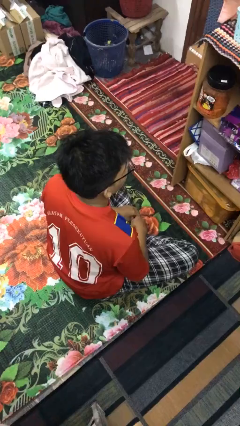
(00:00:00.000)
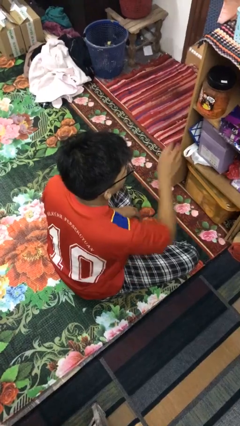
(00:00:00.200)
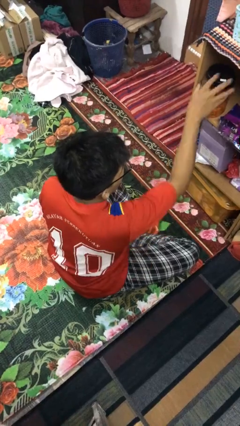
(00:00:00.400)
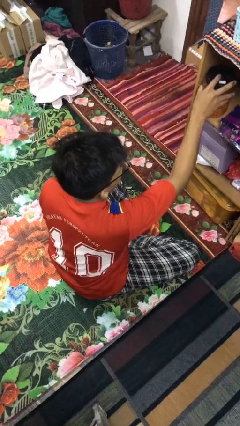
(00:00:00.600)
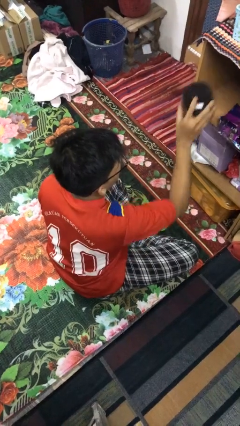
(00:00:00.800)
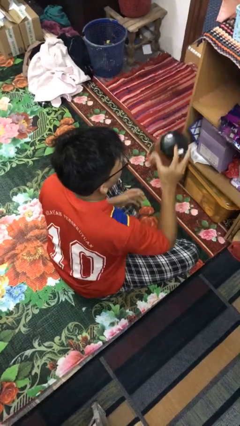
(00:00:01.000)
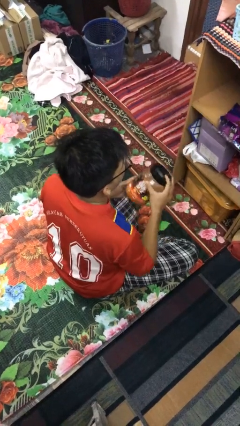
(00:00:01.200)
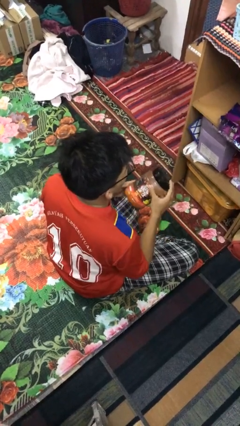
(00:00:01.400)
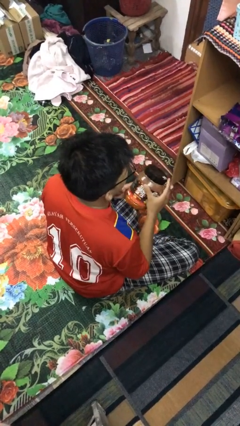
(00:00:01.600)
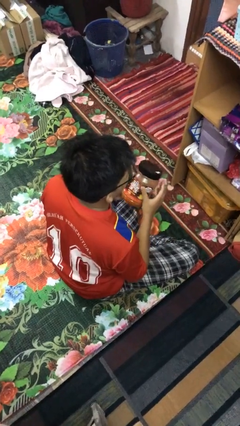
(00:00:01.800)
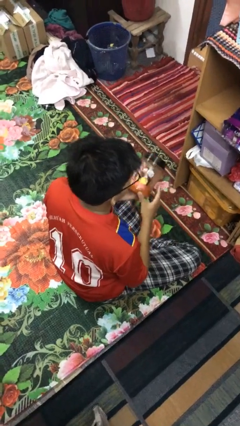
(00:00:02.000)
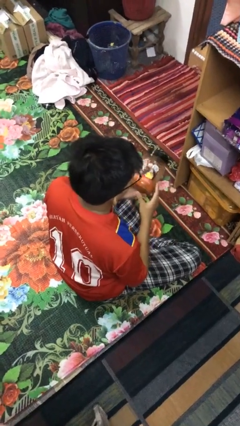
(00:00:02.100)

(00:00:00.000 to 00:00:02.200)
person picks up object from cabinet

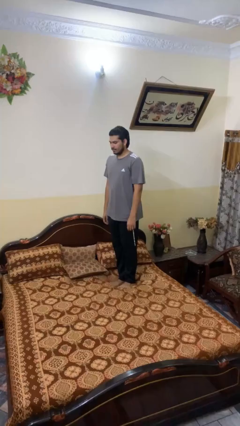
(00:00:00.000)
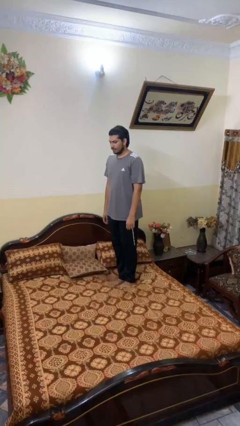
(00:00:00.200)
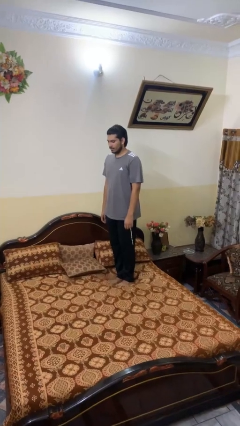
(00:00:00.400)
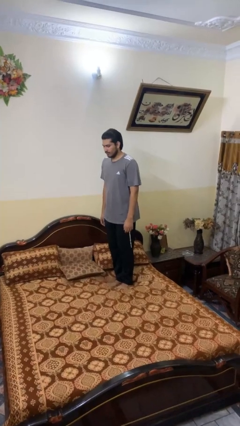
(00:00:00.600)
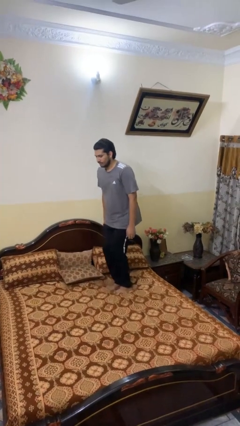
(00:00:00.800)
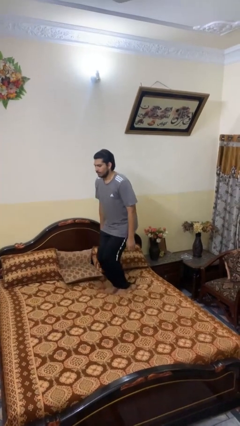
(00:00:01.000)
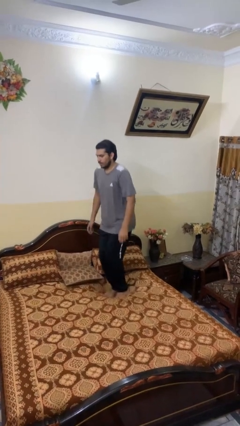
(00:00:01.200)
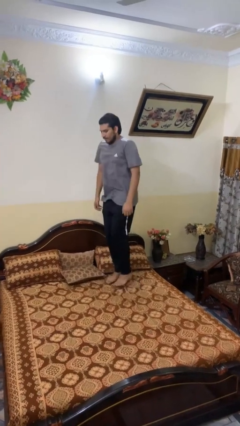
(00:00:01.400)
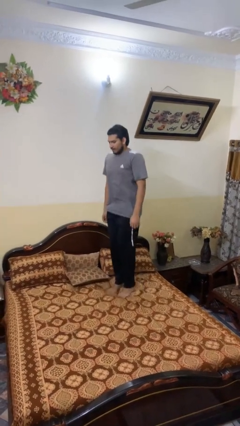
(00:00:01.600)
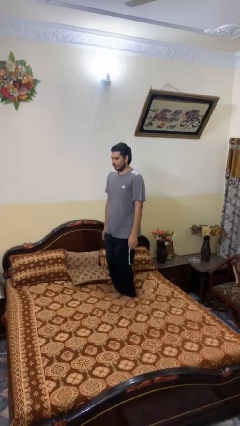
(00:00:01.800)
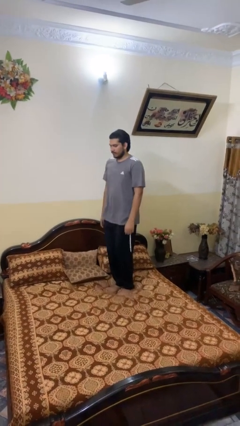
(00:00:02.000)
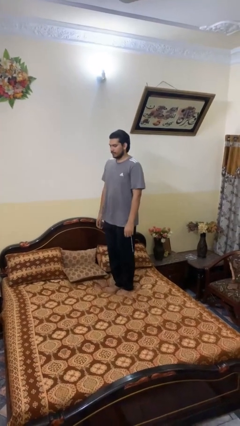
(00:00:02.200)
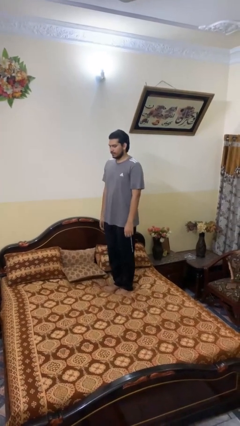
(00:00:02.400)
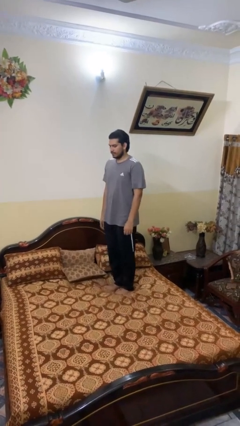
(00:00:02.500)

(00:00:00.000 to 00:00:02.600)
person jumps on bed

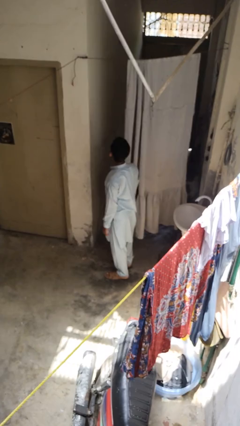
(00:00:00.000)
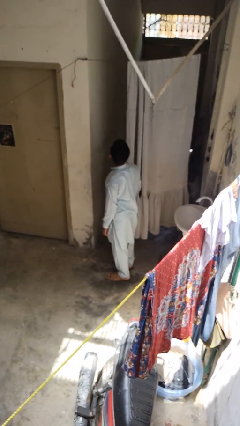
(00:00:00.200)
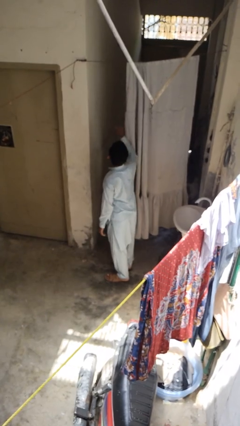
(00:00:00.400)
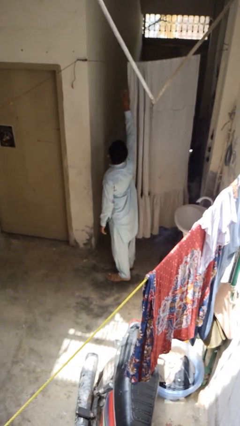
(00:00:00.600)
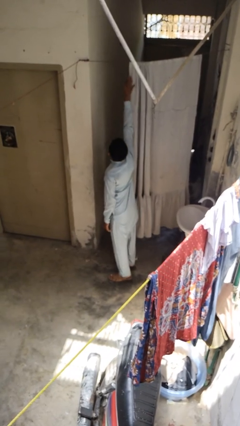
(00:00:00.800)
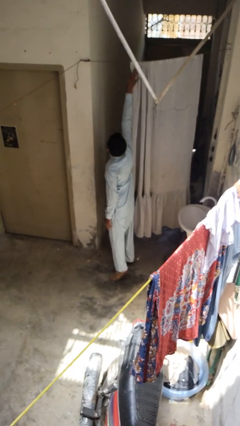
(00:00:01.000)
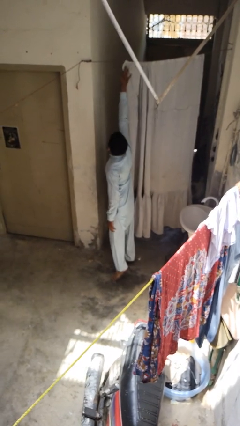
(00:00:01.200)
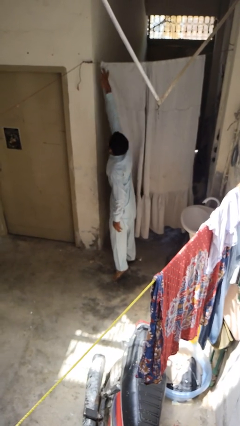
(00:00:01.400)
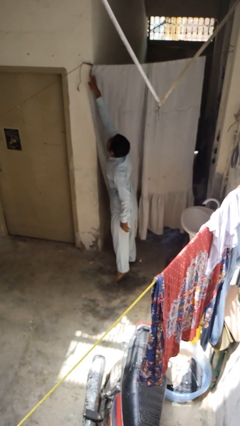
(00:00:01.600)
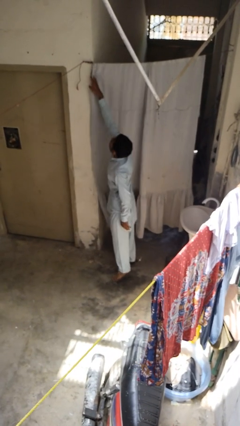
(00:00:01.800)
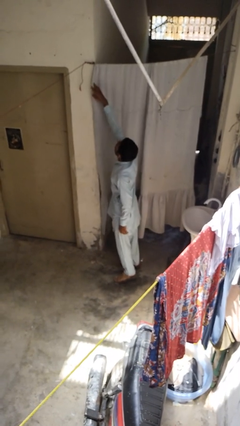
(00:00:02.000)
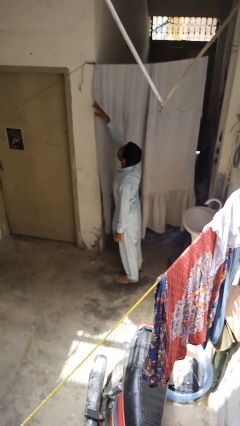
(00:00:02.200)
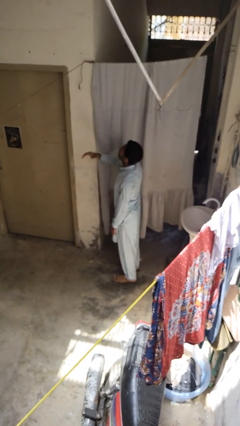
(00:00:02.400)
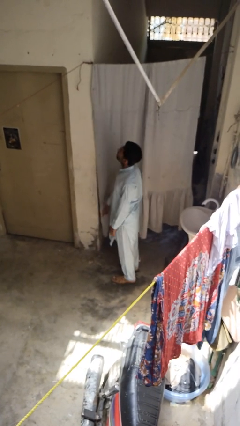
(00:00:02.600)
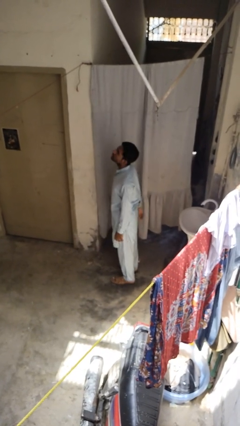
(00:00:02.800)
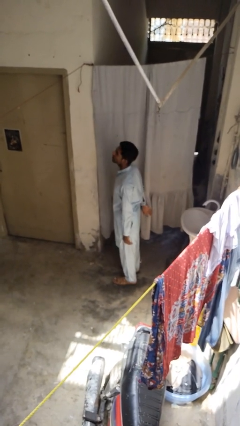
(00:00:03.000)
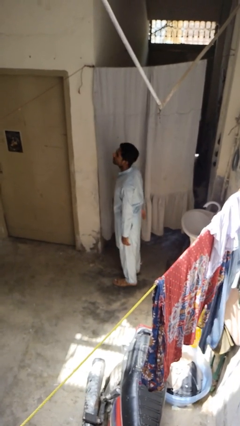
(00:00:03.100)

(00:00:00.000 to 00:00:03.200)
person closes curtains

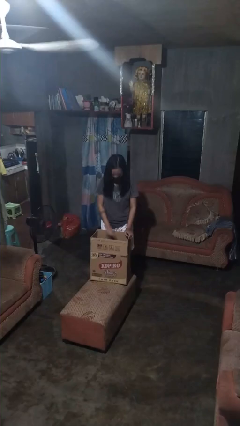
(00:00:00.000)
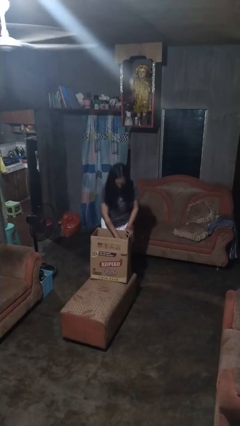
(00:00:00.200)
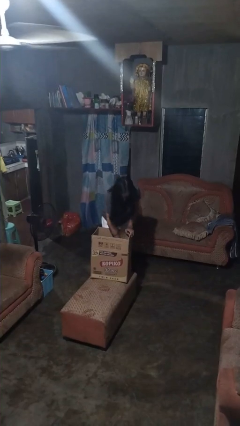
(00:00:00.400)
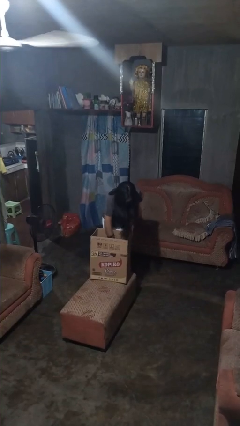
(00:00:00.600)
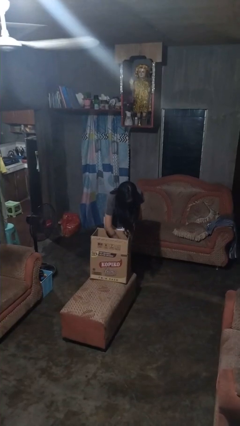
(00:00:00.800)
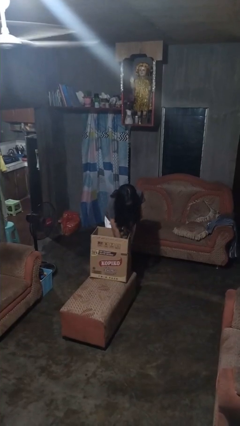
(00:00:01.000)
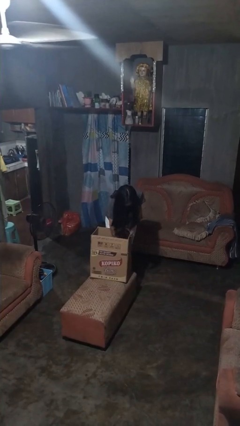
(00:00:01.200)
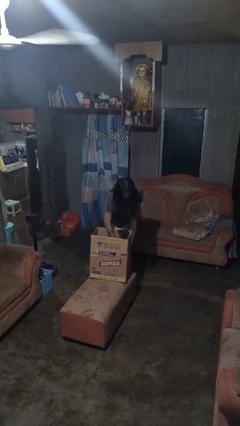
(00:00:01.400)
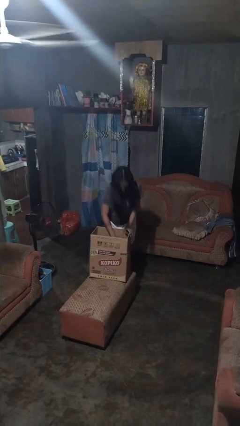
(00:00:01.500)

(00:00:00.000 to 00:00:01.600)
person searches in box

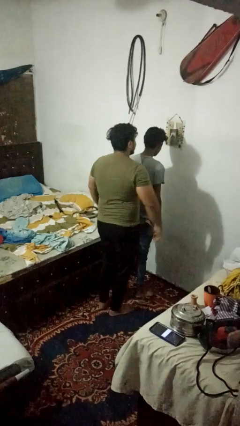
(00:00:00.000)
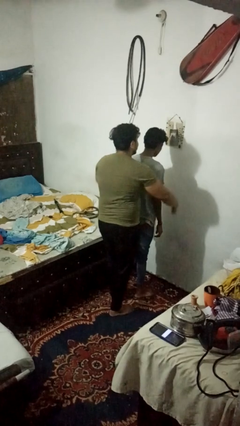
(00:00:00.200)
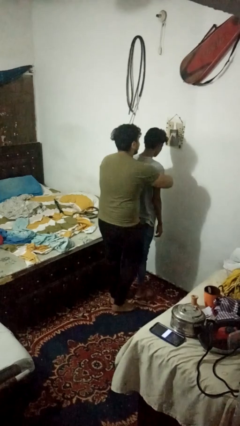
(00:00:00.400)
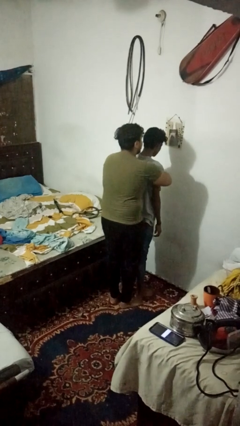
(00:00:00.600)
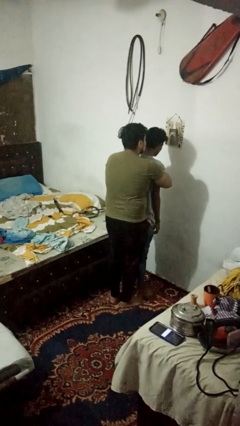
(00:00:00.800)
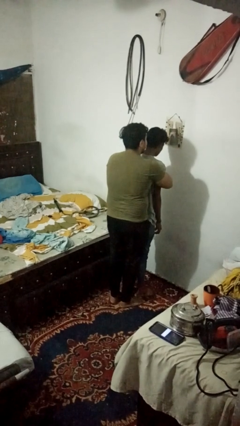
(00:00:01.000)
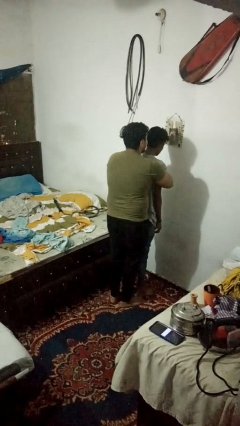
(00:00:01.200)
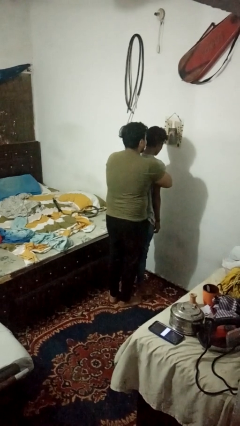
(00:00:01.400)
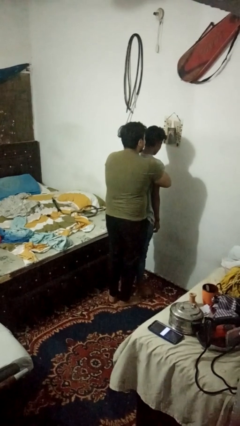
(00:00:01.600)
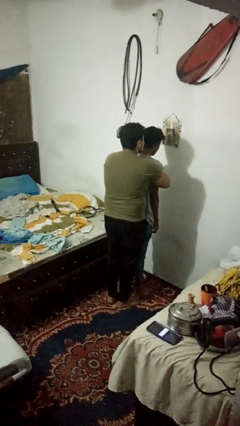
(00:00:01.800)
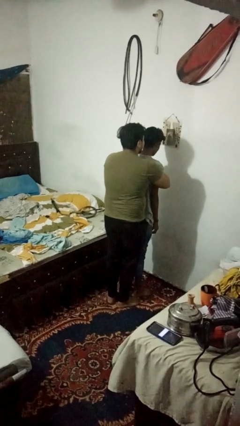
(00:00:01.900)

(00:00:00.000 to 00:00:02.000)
person hugs person from behind

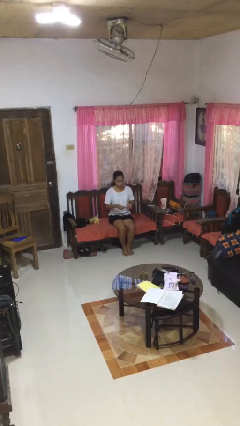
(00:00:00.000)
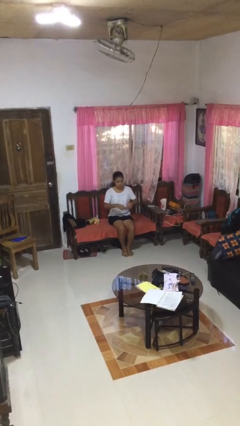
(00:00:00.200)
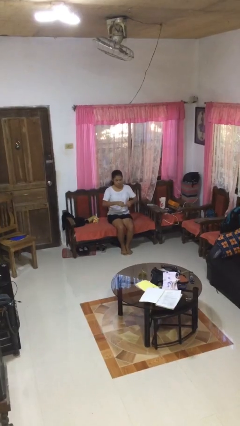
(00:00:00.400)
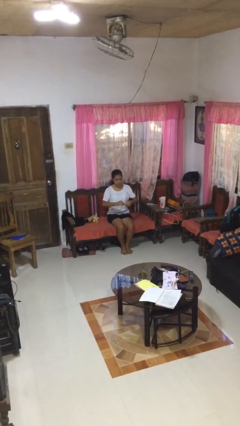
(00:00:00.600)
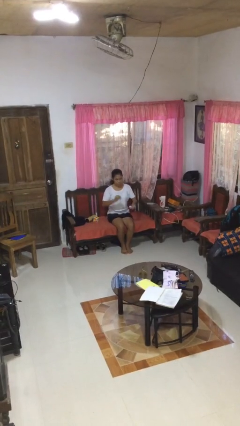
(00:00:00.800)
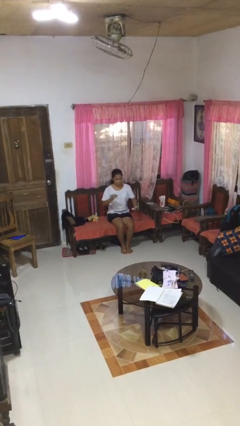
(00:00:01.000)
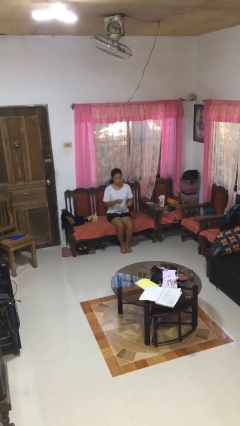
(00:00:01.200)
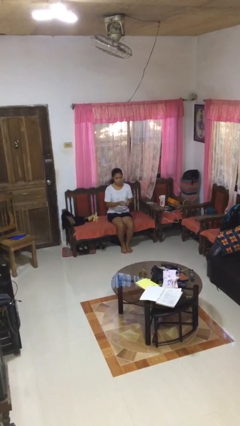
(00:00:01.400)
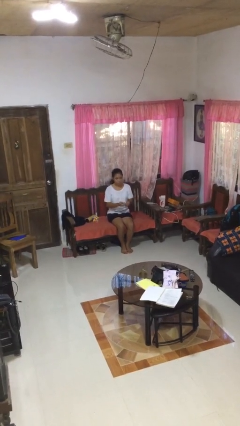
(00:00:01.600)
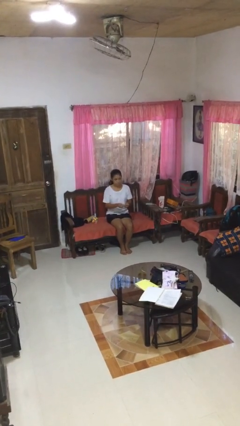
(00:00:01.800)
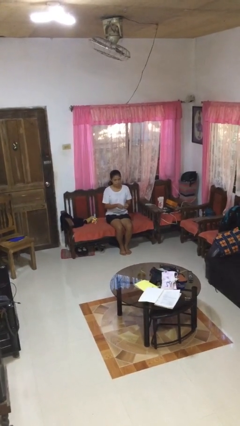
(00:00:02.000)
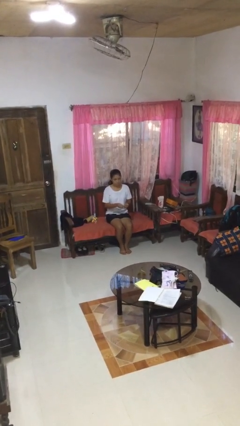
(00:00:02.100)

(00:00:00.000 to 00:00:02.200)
person tears paper

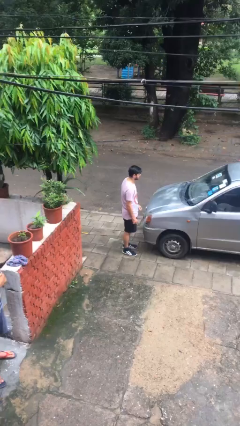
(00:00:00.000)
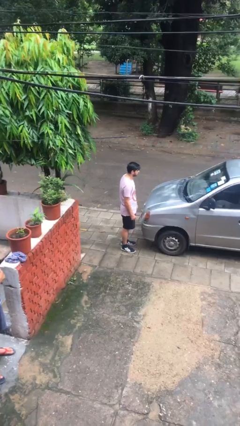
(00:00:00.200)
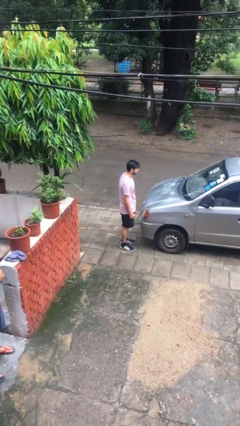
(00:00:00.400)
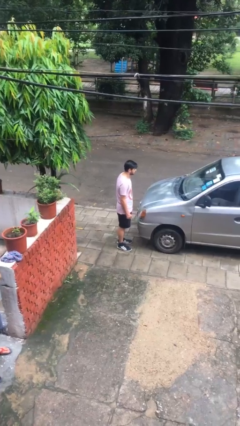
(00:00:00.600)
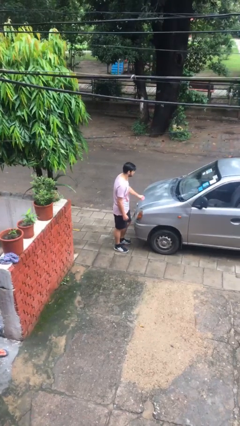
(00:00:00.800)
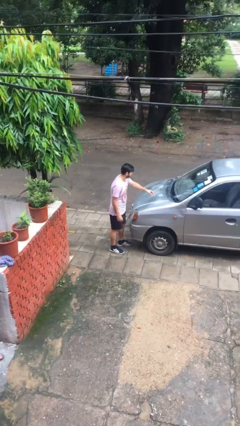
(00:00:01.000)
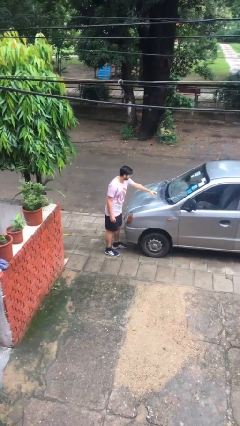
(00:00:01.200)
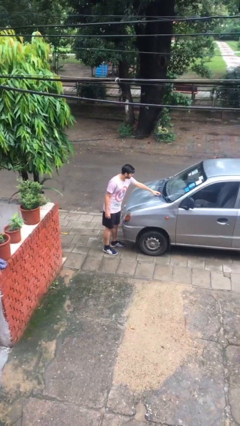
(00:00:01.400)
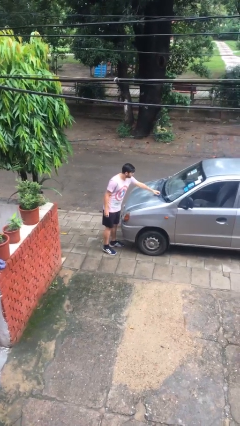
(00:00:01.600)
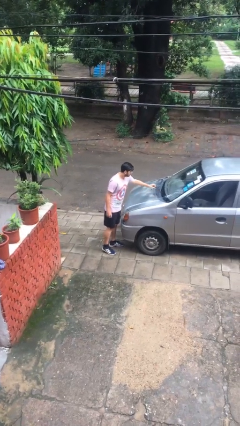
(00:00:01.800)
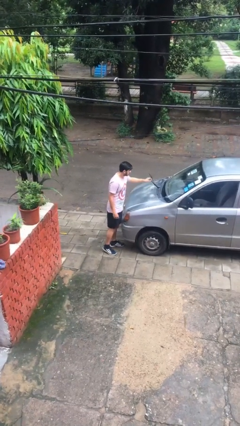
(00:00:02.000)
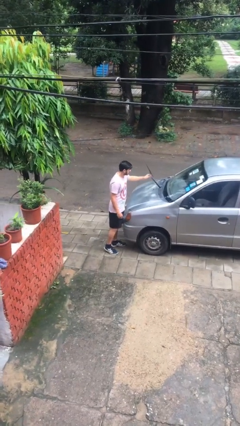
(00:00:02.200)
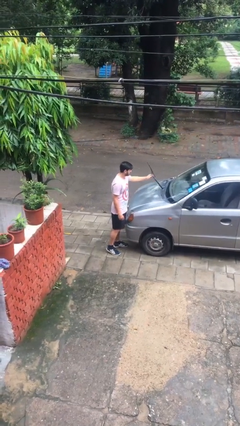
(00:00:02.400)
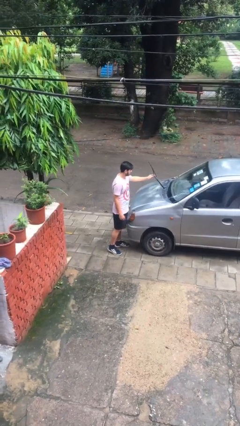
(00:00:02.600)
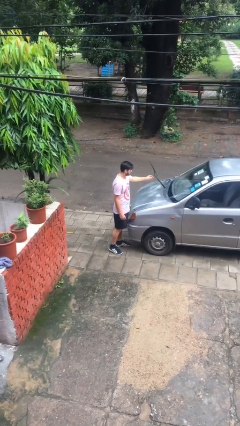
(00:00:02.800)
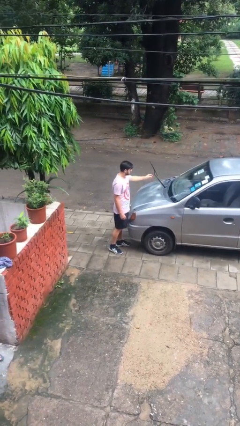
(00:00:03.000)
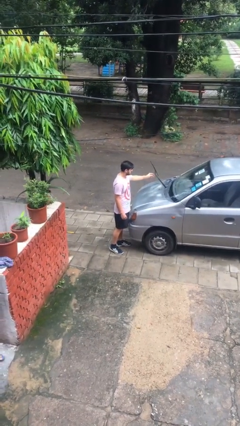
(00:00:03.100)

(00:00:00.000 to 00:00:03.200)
person flips up car wipers

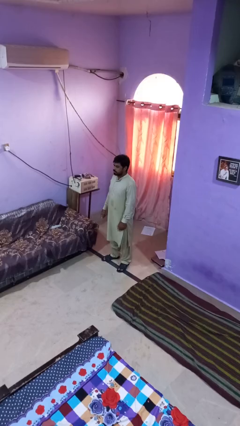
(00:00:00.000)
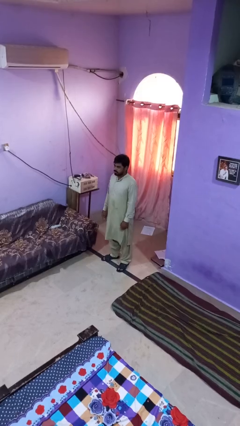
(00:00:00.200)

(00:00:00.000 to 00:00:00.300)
person gestures behind me
